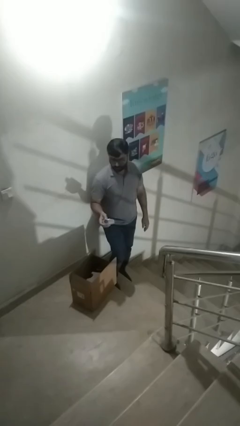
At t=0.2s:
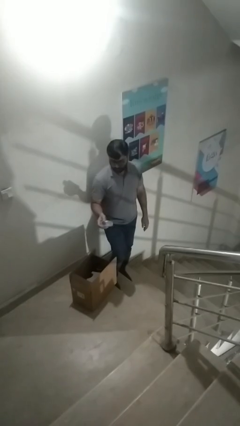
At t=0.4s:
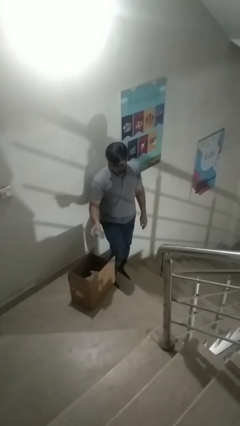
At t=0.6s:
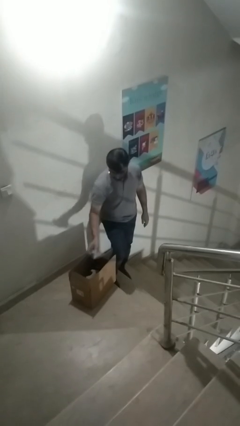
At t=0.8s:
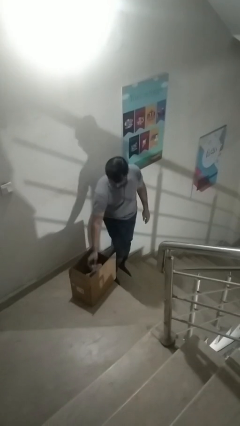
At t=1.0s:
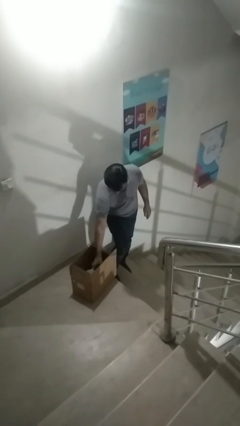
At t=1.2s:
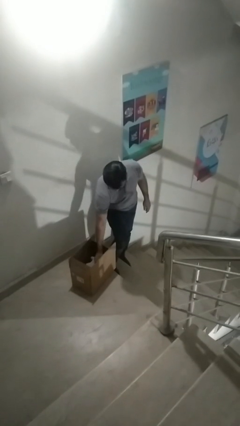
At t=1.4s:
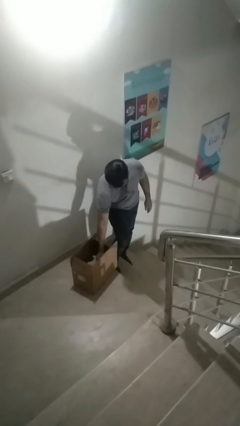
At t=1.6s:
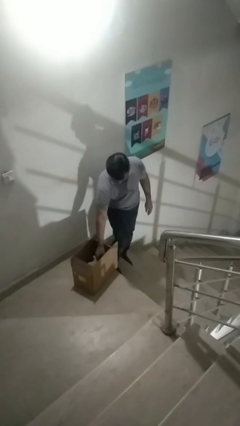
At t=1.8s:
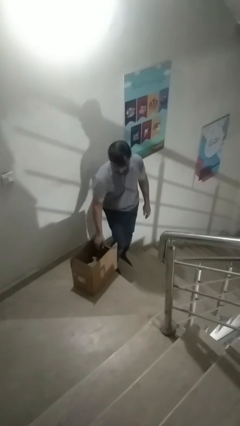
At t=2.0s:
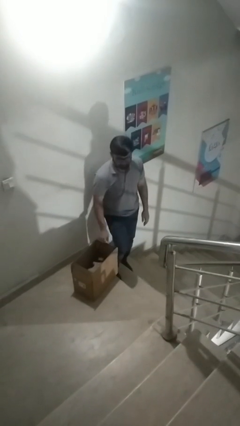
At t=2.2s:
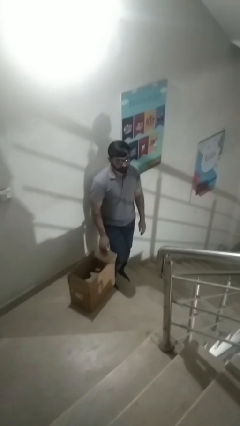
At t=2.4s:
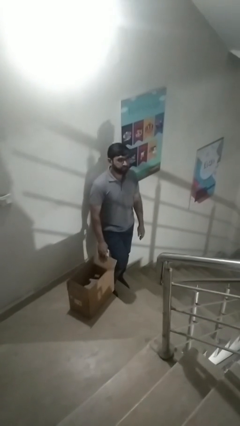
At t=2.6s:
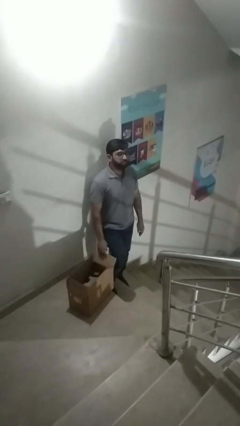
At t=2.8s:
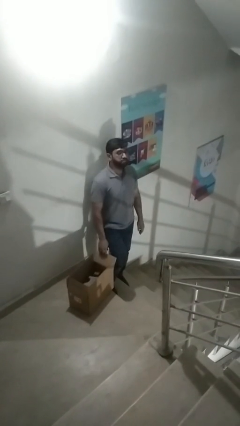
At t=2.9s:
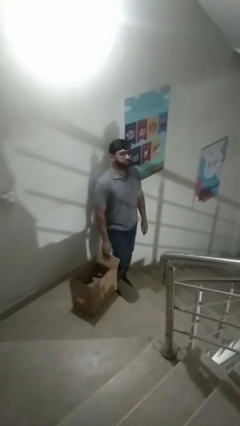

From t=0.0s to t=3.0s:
person puts object into box

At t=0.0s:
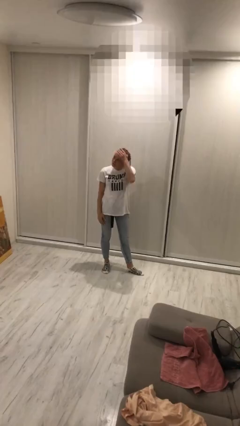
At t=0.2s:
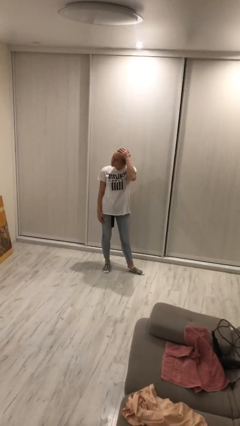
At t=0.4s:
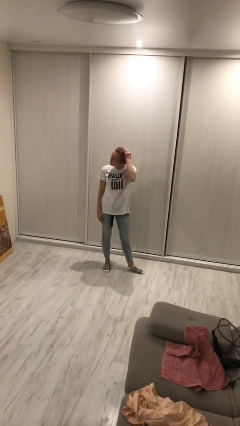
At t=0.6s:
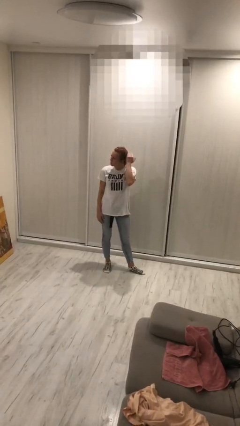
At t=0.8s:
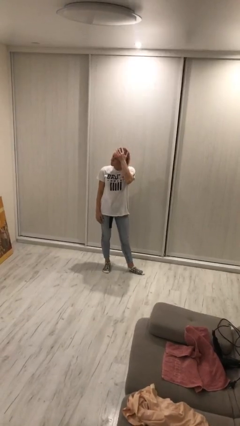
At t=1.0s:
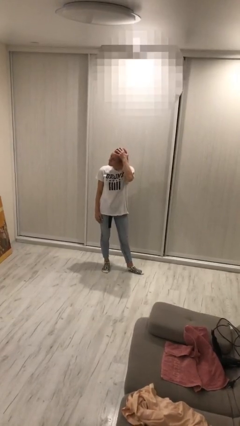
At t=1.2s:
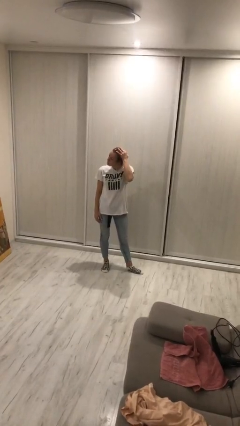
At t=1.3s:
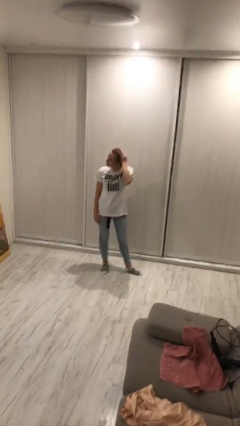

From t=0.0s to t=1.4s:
person pats head

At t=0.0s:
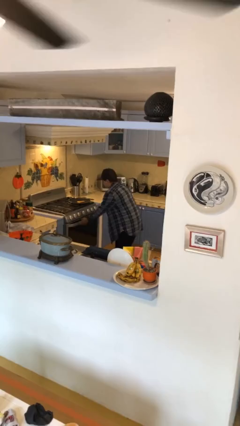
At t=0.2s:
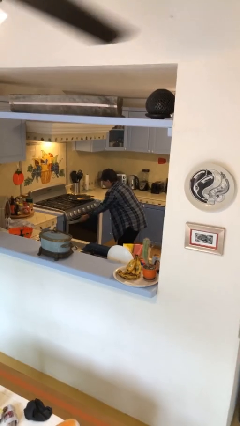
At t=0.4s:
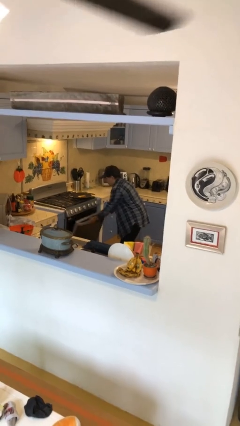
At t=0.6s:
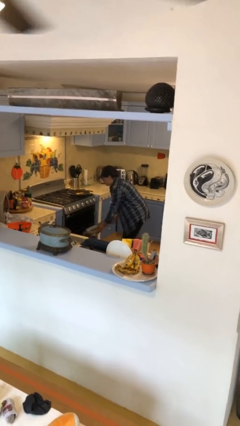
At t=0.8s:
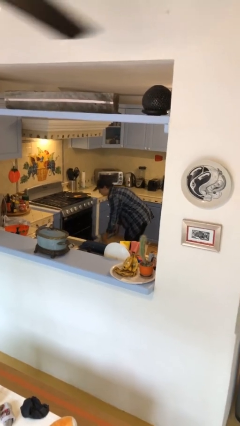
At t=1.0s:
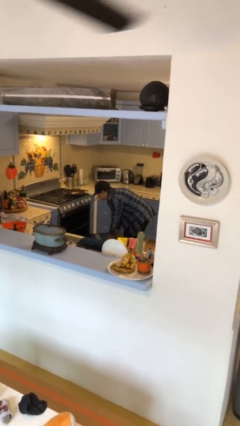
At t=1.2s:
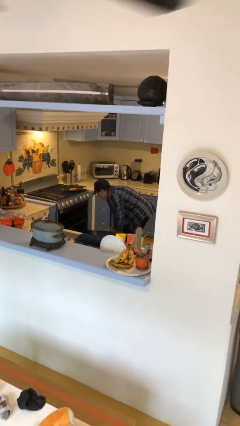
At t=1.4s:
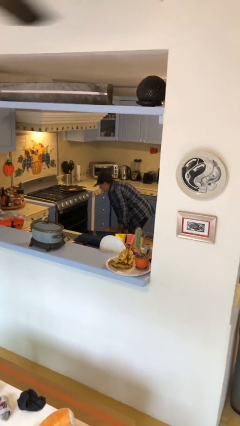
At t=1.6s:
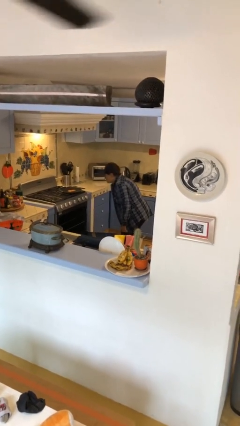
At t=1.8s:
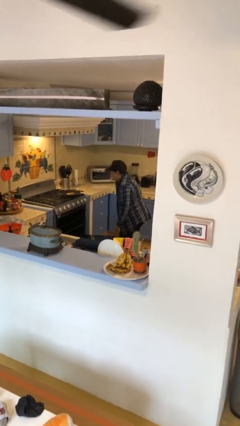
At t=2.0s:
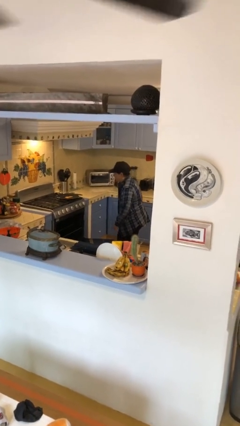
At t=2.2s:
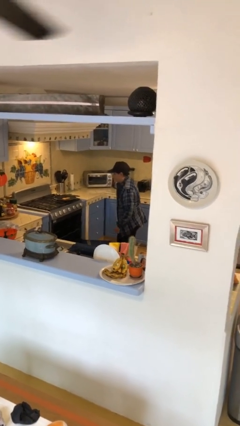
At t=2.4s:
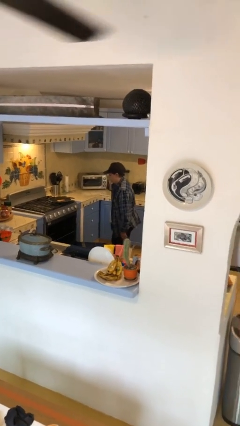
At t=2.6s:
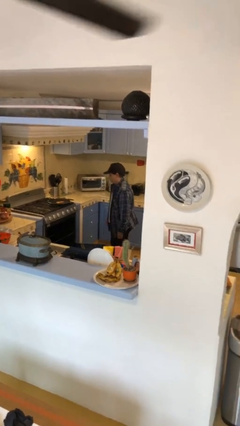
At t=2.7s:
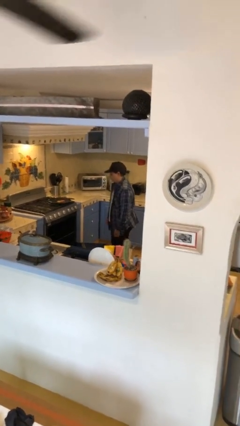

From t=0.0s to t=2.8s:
person puts object into toaster

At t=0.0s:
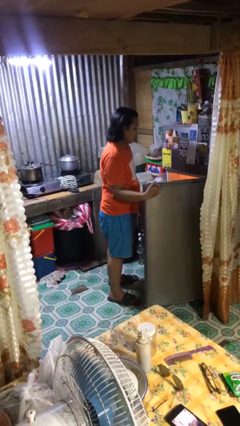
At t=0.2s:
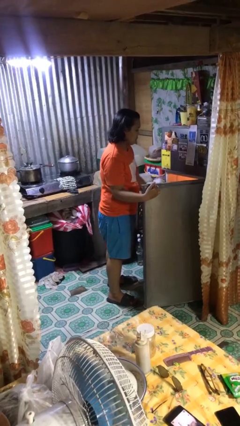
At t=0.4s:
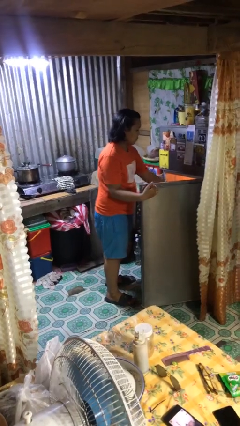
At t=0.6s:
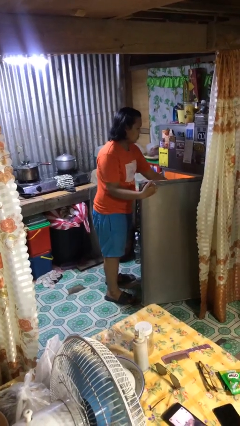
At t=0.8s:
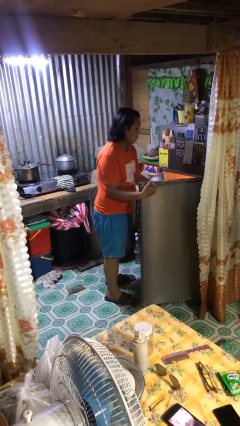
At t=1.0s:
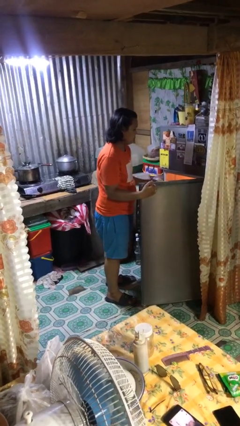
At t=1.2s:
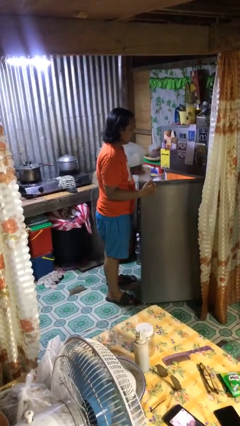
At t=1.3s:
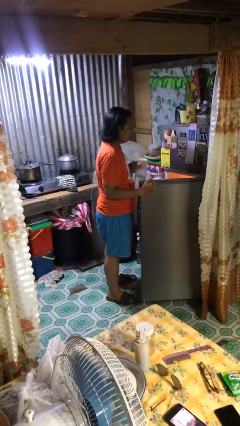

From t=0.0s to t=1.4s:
person takes object from refrigerator

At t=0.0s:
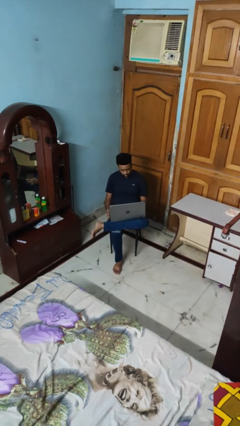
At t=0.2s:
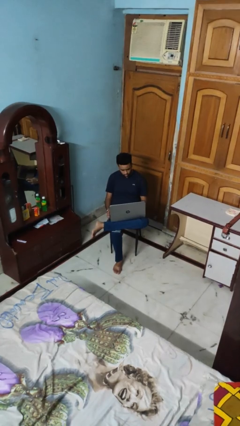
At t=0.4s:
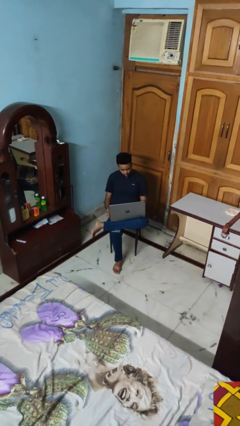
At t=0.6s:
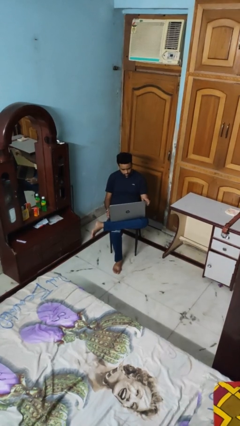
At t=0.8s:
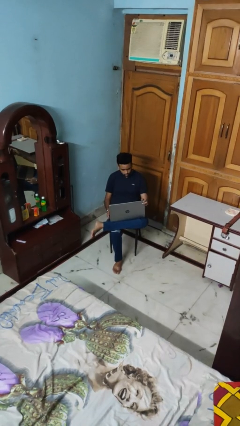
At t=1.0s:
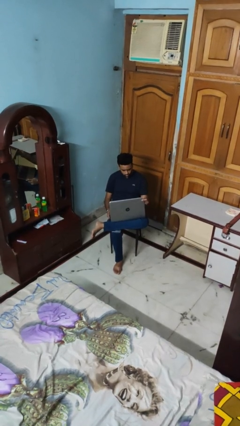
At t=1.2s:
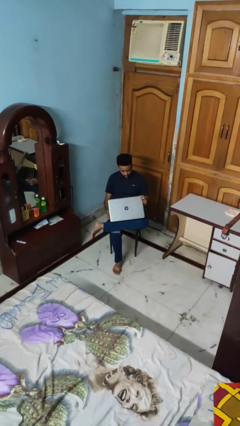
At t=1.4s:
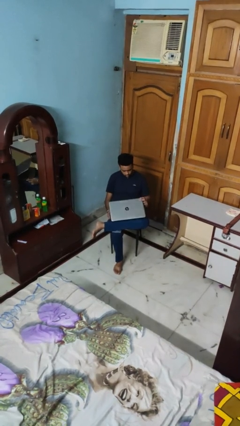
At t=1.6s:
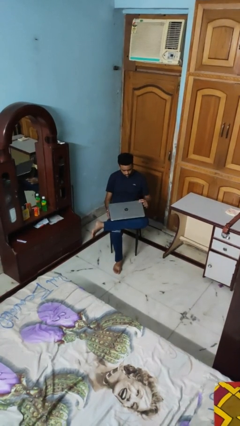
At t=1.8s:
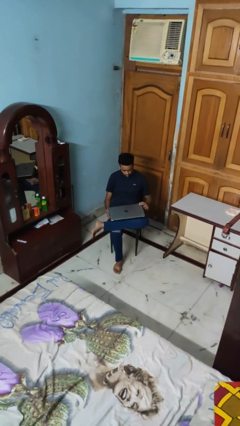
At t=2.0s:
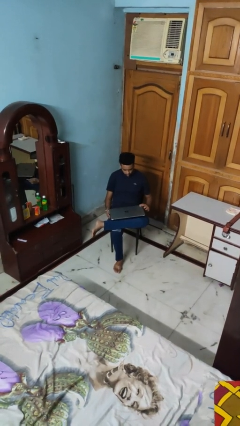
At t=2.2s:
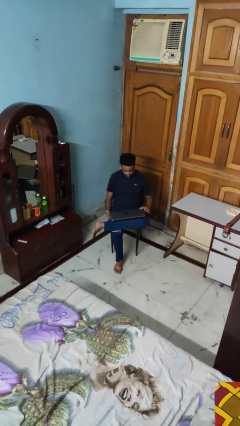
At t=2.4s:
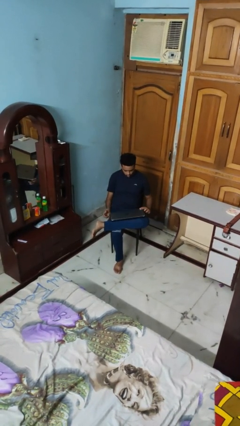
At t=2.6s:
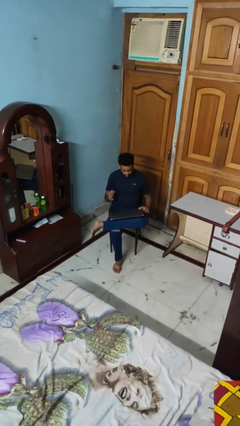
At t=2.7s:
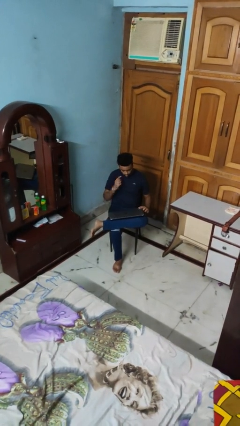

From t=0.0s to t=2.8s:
person closes laptop

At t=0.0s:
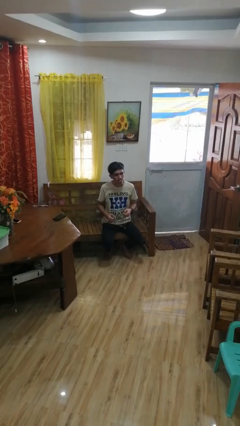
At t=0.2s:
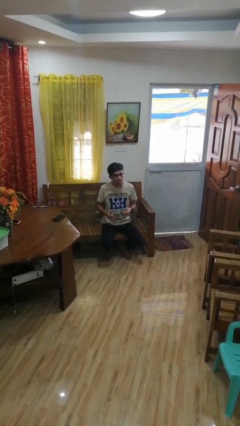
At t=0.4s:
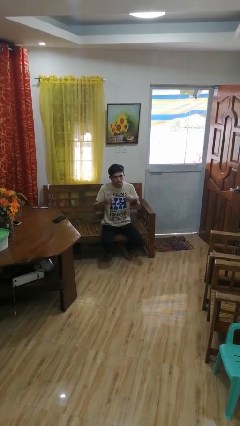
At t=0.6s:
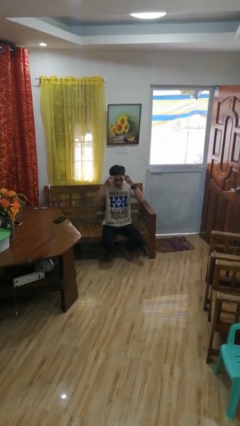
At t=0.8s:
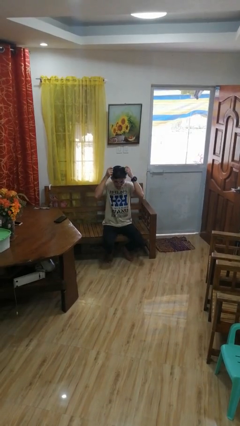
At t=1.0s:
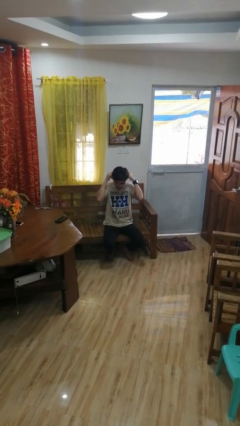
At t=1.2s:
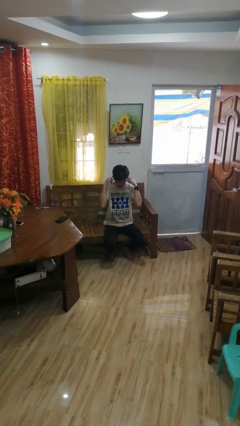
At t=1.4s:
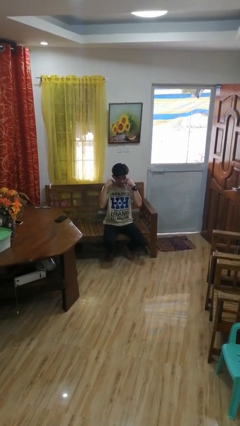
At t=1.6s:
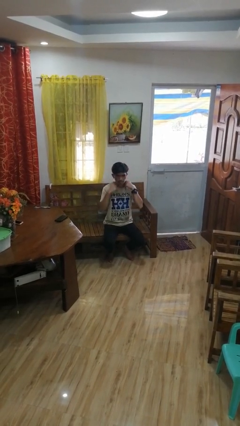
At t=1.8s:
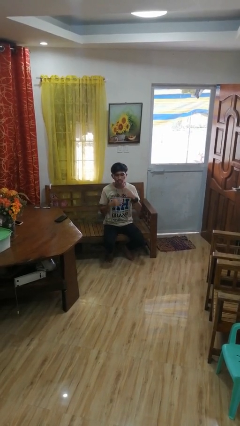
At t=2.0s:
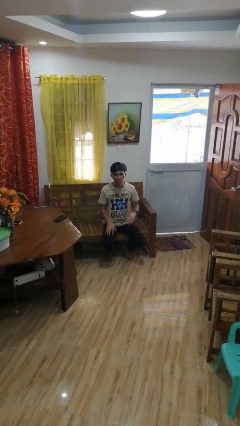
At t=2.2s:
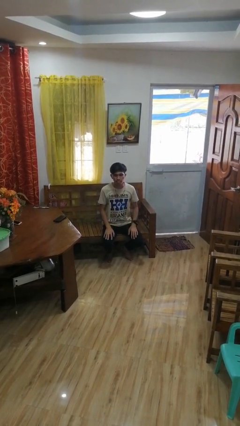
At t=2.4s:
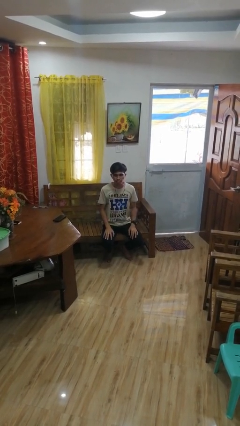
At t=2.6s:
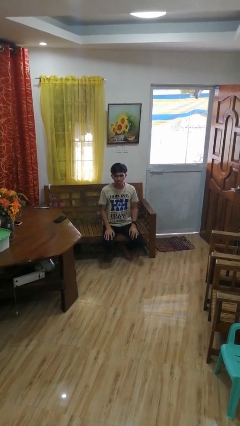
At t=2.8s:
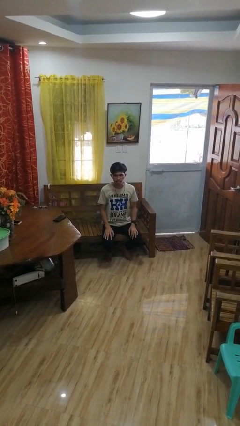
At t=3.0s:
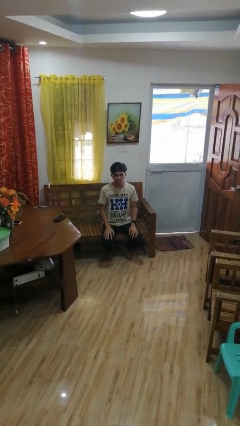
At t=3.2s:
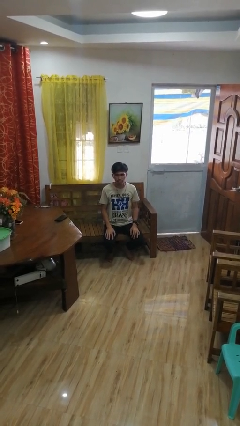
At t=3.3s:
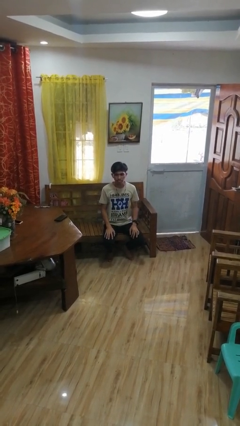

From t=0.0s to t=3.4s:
person puts on necklace

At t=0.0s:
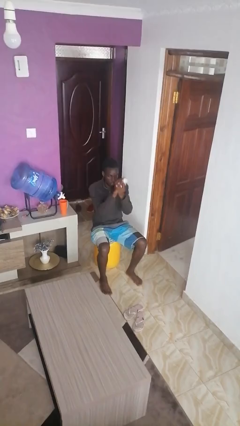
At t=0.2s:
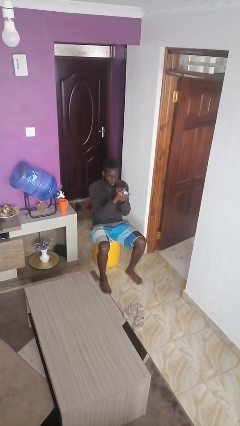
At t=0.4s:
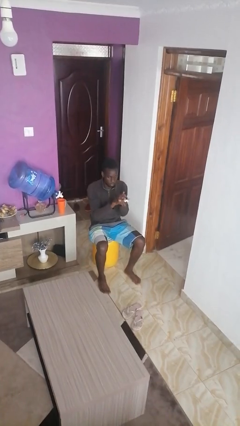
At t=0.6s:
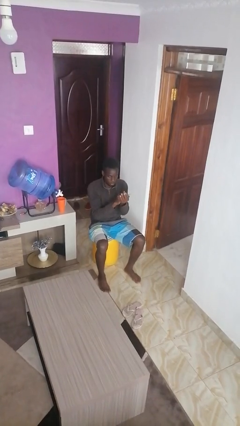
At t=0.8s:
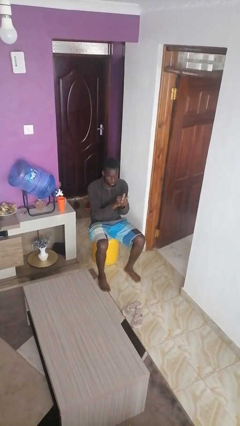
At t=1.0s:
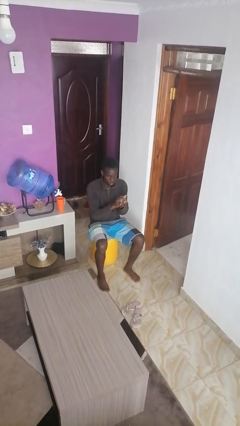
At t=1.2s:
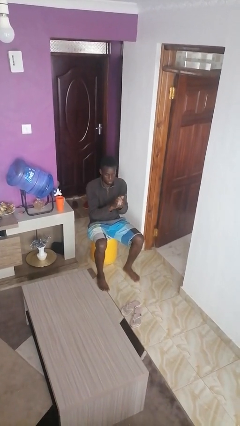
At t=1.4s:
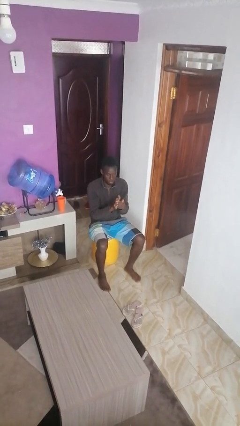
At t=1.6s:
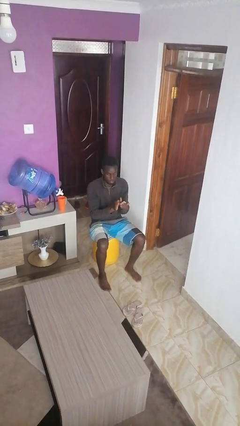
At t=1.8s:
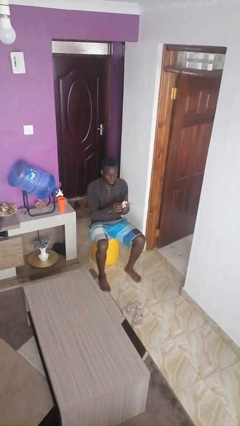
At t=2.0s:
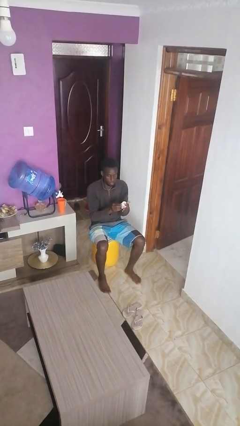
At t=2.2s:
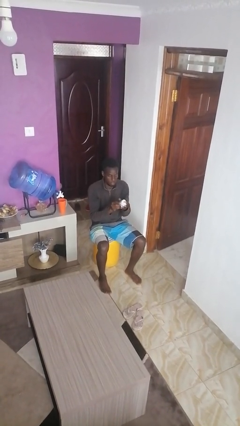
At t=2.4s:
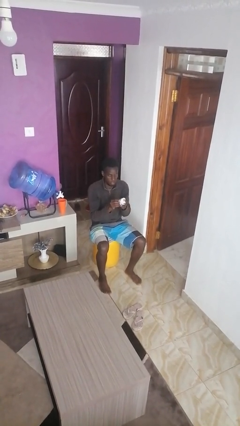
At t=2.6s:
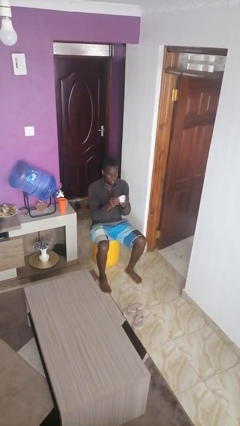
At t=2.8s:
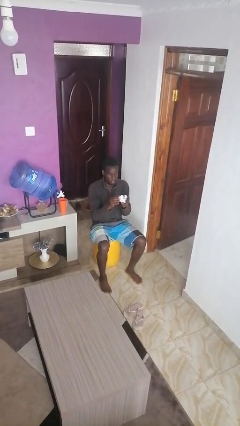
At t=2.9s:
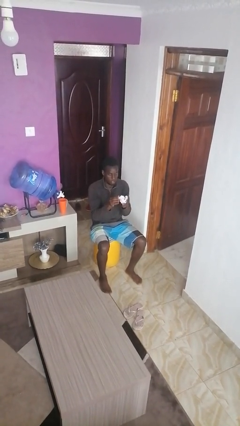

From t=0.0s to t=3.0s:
person crumples paper
